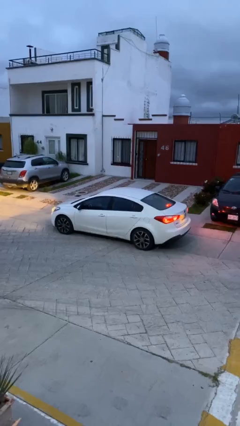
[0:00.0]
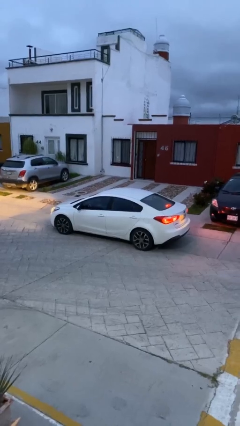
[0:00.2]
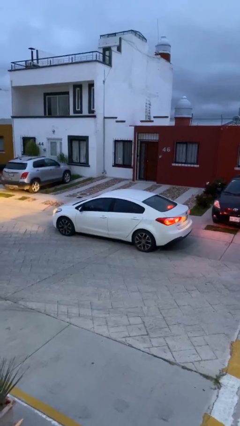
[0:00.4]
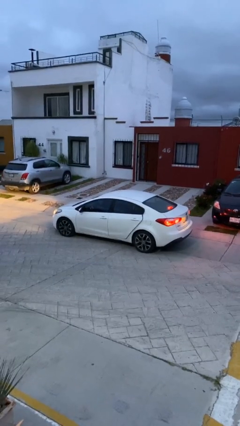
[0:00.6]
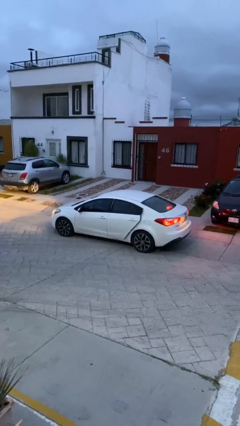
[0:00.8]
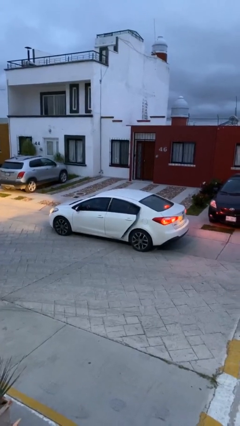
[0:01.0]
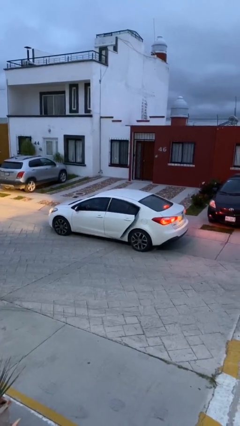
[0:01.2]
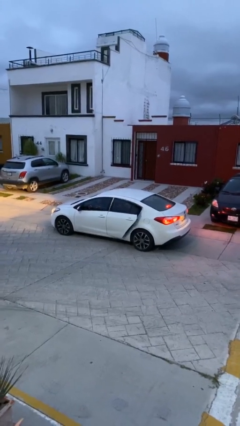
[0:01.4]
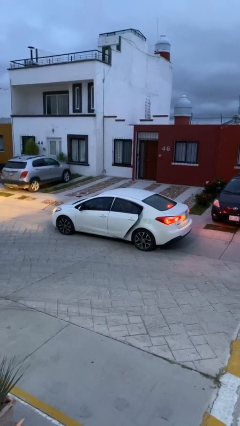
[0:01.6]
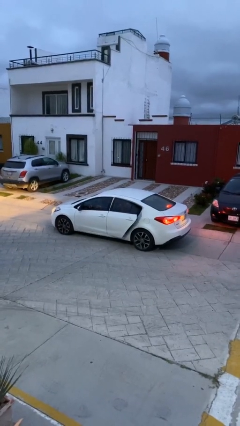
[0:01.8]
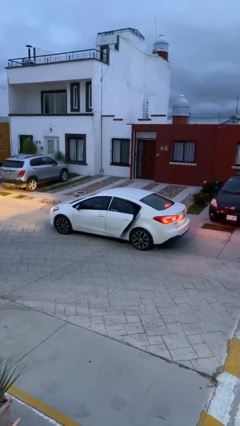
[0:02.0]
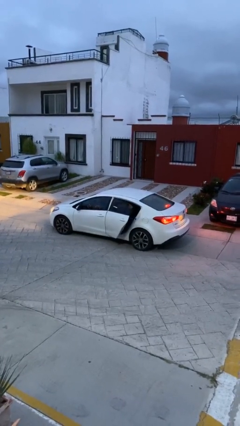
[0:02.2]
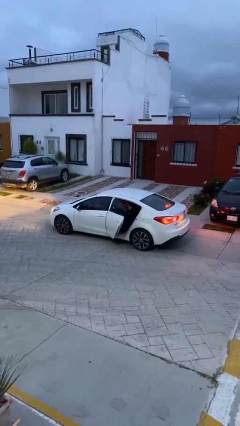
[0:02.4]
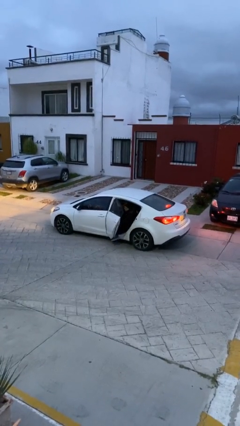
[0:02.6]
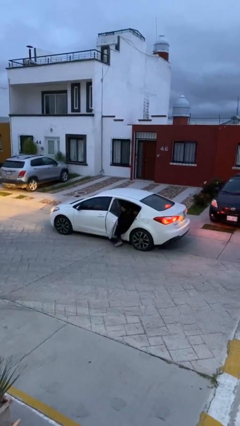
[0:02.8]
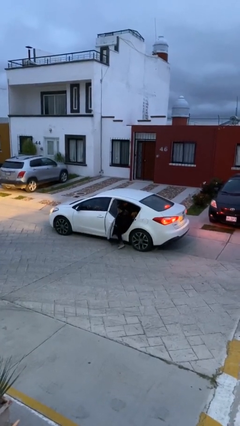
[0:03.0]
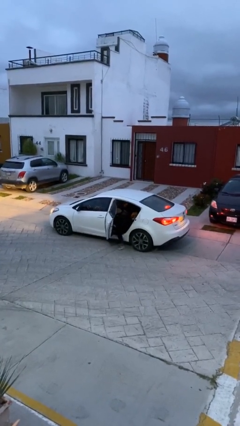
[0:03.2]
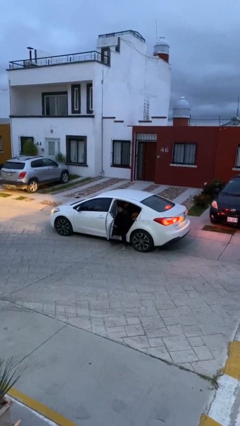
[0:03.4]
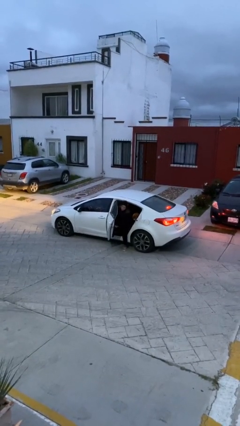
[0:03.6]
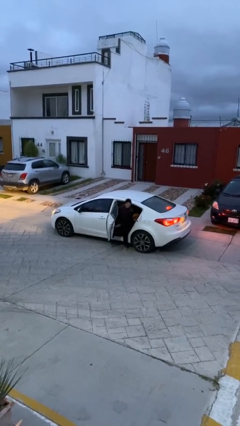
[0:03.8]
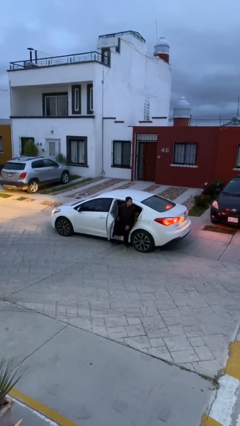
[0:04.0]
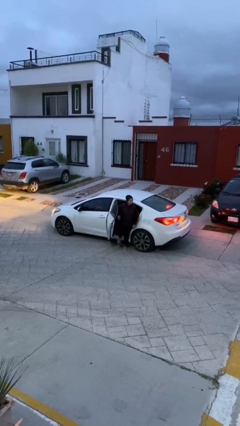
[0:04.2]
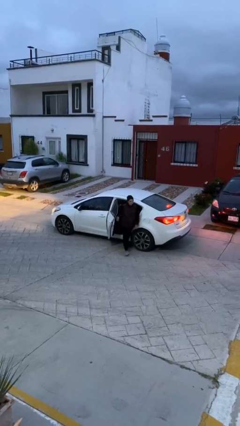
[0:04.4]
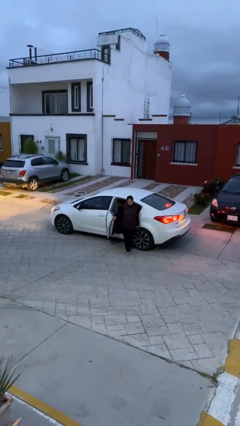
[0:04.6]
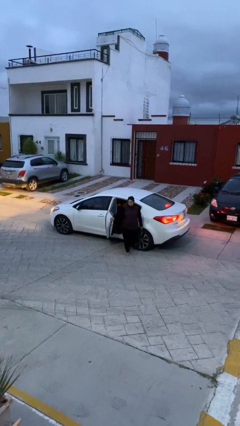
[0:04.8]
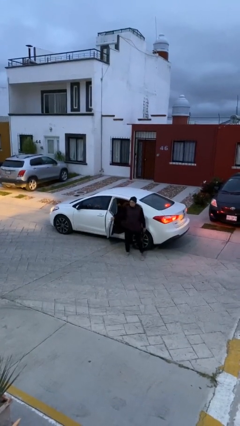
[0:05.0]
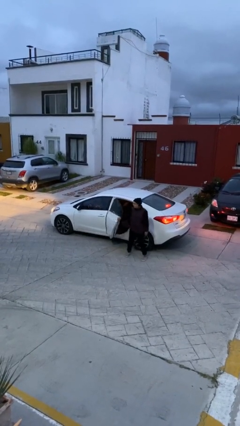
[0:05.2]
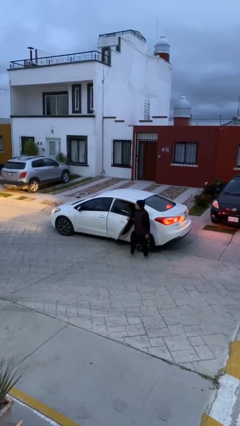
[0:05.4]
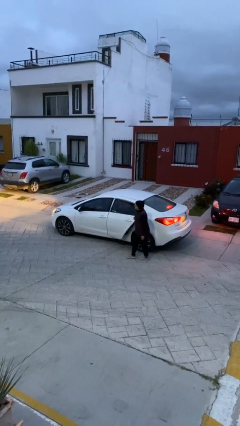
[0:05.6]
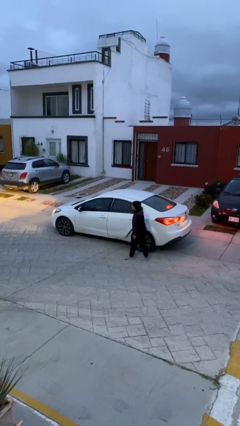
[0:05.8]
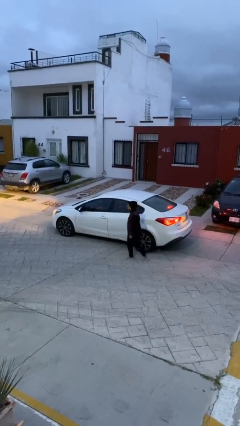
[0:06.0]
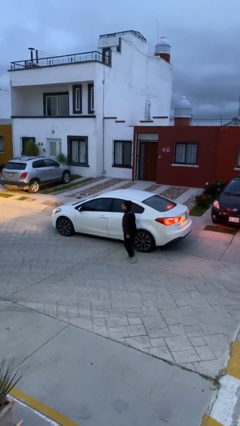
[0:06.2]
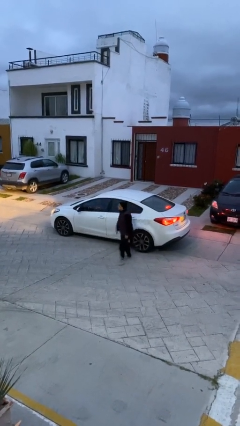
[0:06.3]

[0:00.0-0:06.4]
car drops off person

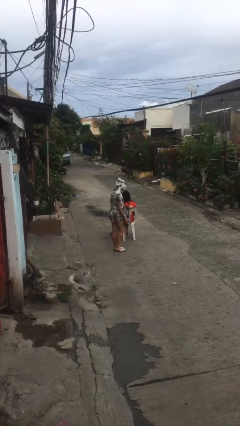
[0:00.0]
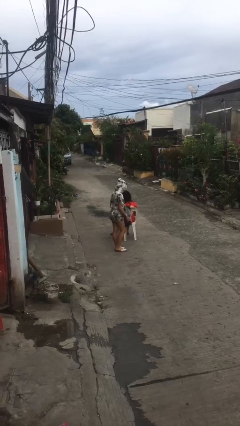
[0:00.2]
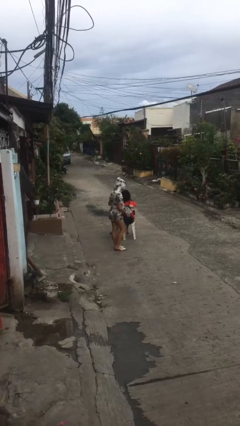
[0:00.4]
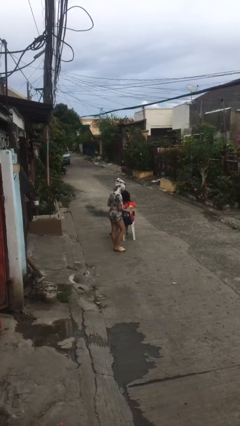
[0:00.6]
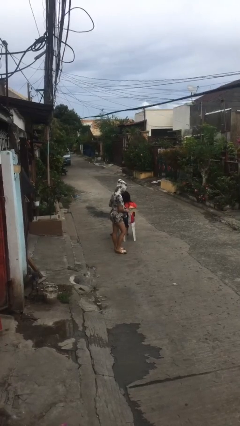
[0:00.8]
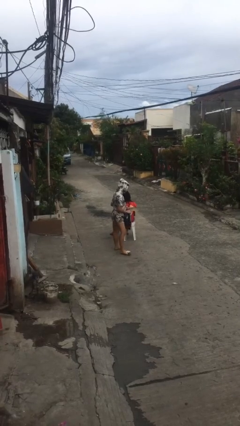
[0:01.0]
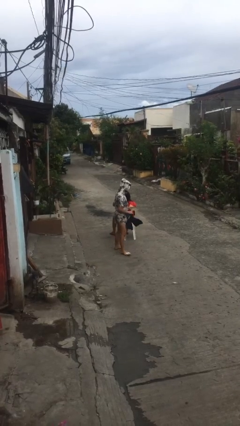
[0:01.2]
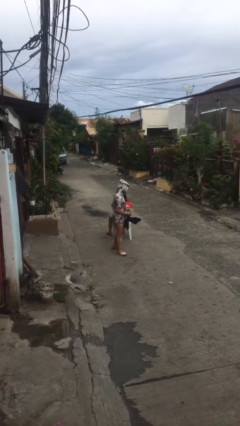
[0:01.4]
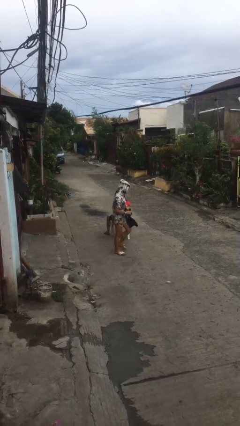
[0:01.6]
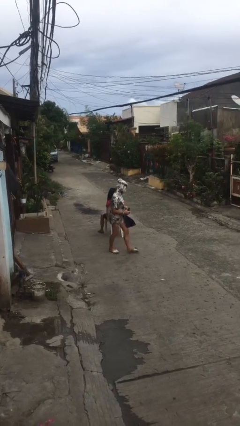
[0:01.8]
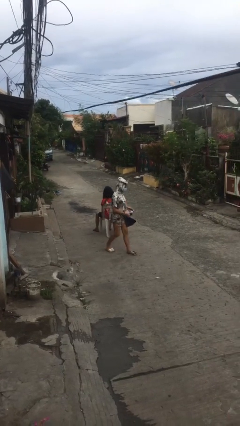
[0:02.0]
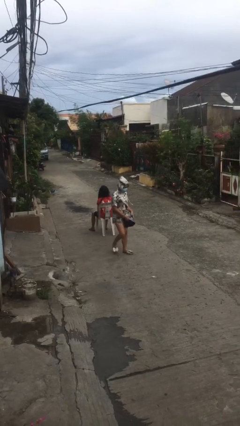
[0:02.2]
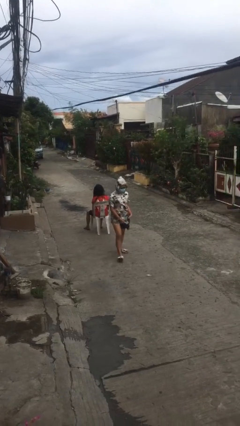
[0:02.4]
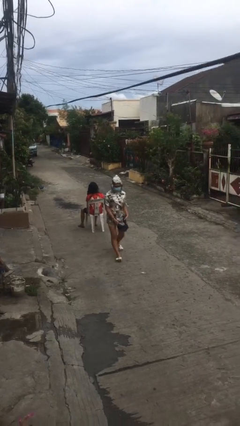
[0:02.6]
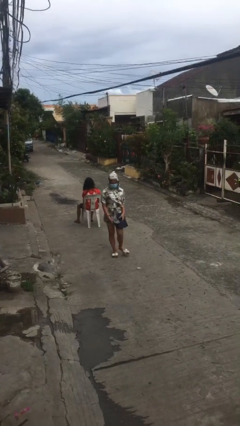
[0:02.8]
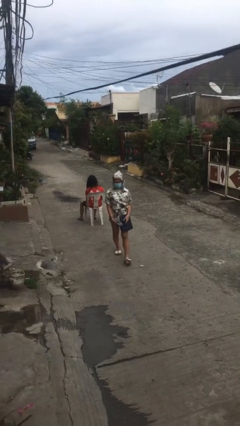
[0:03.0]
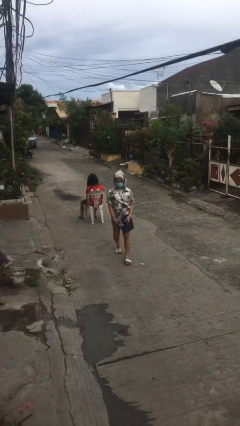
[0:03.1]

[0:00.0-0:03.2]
person steals object from person

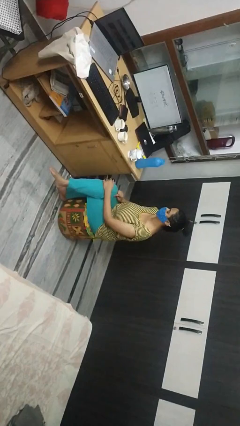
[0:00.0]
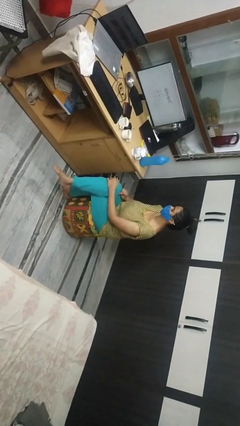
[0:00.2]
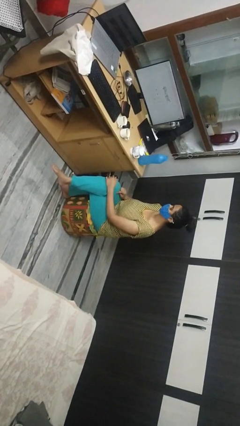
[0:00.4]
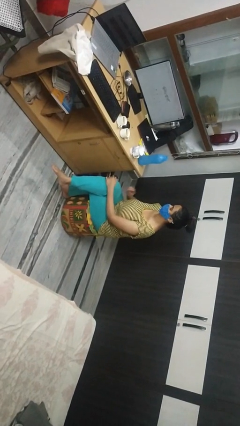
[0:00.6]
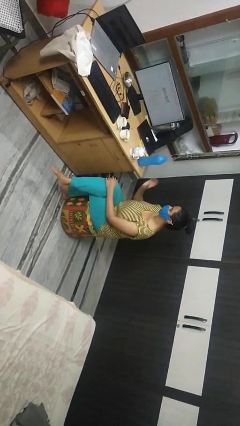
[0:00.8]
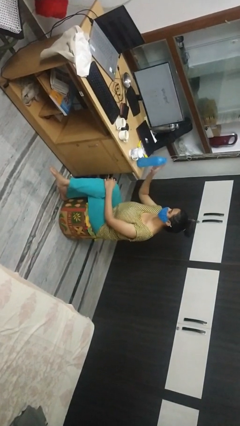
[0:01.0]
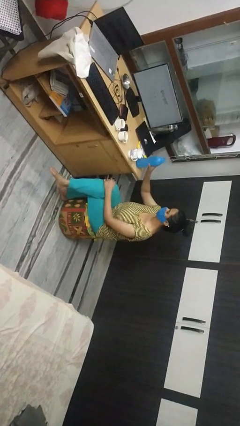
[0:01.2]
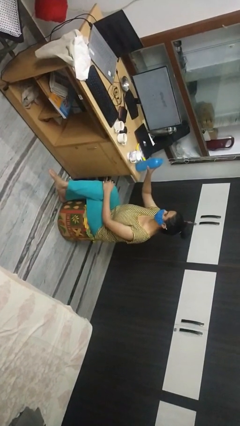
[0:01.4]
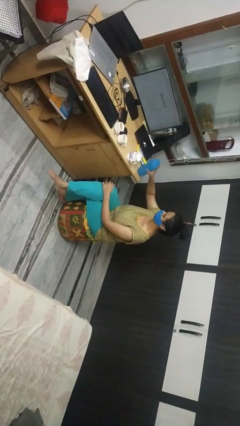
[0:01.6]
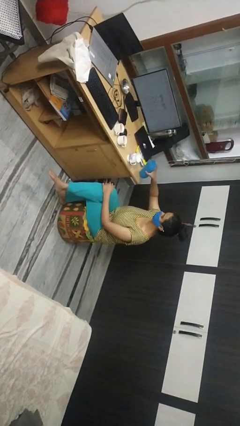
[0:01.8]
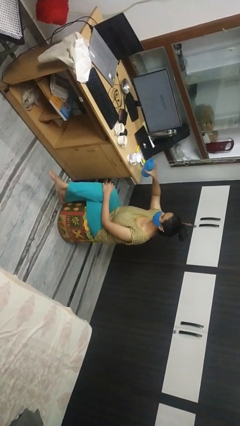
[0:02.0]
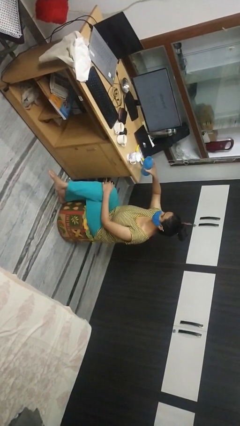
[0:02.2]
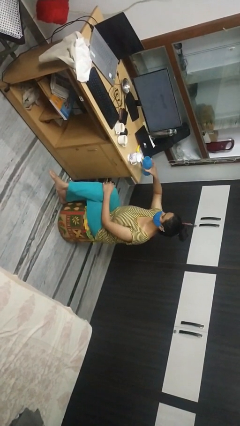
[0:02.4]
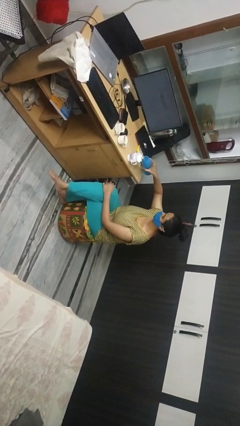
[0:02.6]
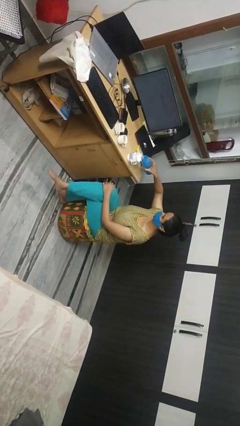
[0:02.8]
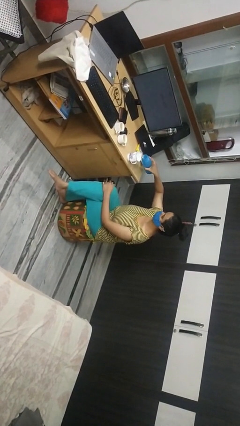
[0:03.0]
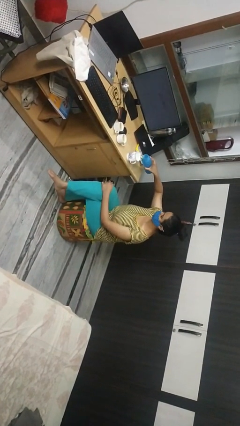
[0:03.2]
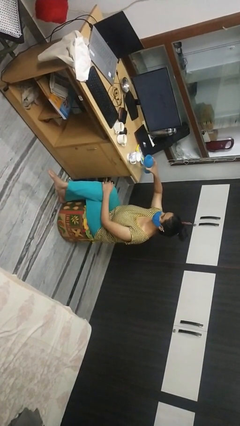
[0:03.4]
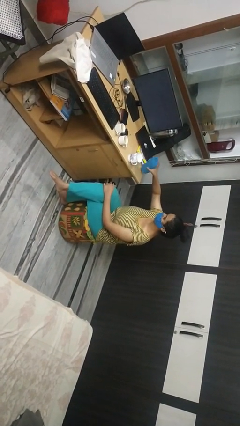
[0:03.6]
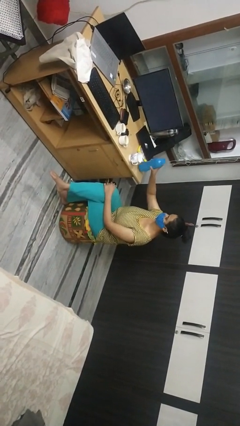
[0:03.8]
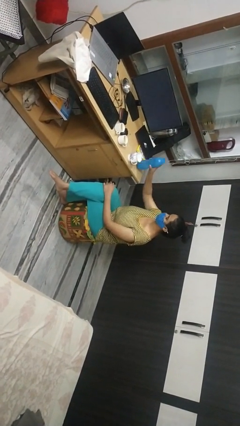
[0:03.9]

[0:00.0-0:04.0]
person pours liquid into cup

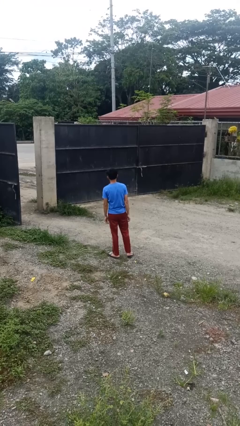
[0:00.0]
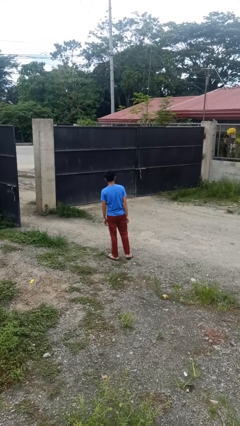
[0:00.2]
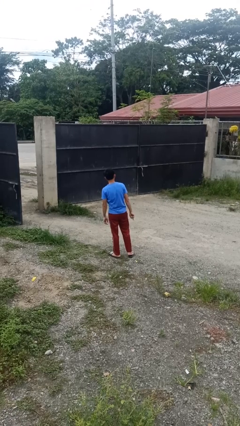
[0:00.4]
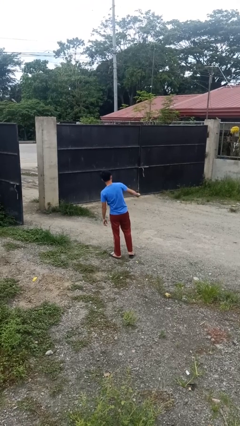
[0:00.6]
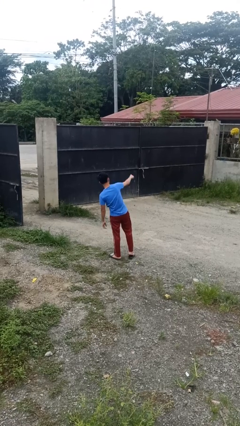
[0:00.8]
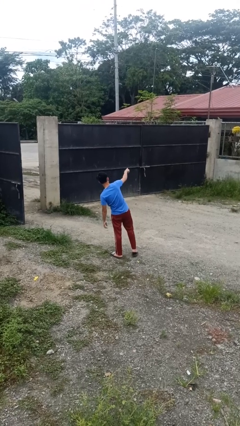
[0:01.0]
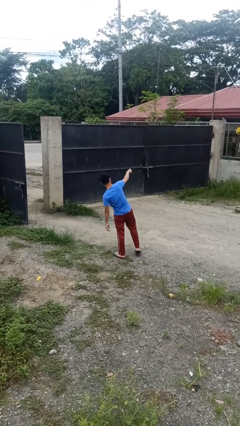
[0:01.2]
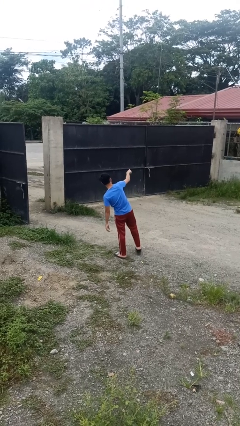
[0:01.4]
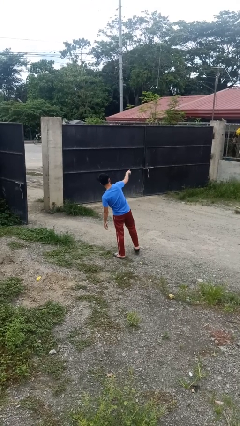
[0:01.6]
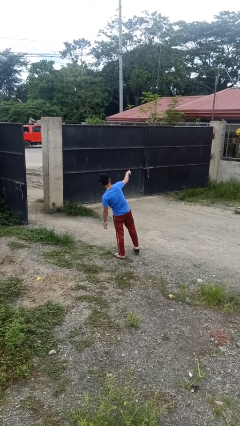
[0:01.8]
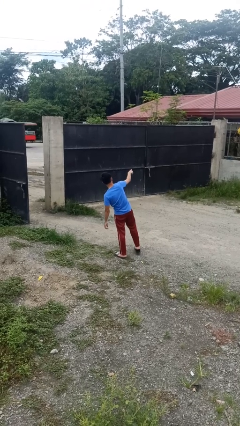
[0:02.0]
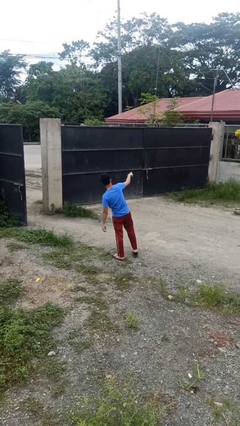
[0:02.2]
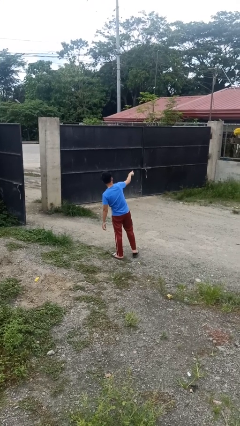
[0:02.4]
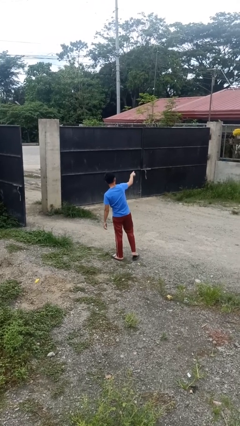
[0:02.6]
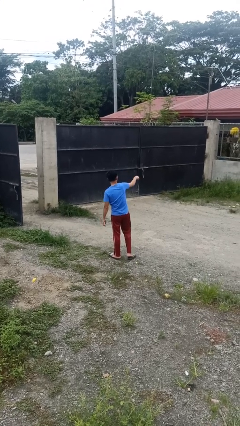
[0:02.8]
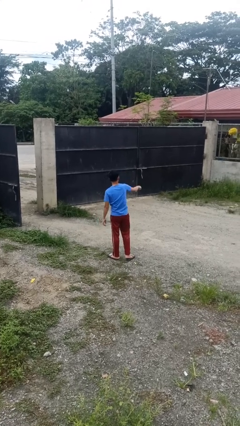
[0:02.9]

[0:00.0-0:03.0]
person points at person

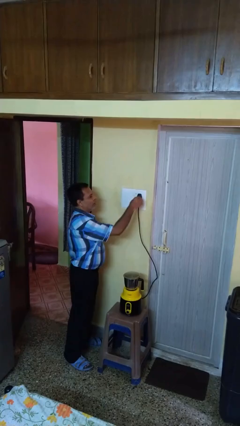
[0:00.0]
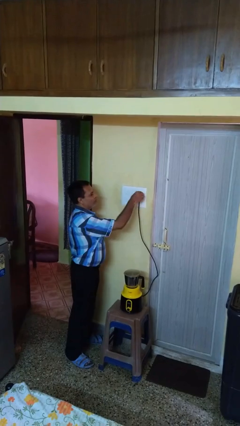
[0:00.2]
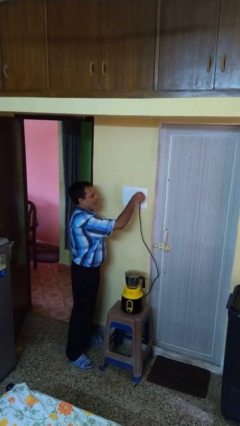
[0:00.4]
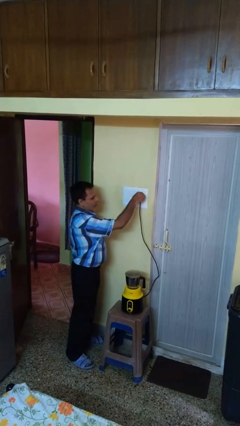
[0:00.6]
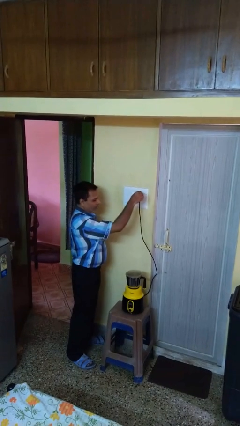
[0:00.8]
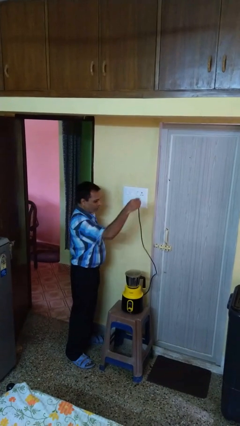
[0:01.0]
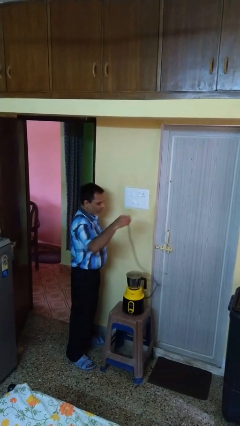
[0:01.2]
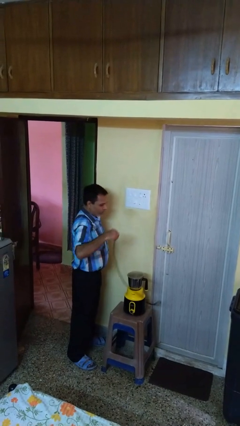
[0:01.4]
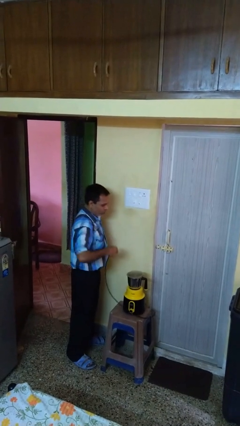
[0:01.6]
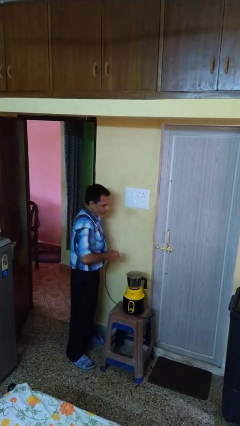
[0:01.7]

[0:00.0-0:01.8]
person unplugs from electrical socket
